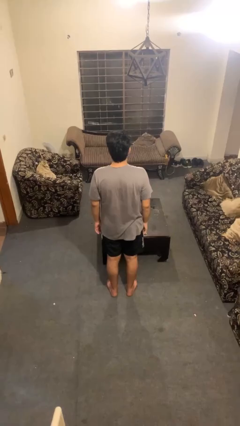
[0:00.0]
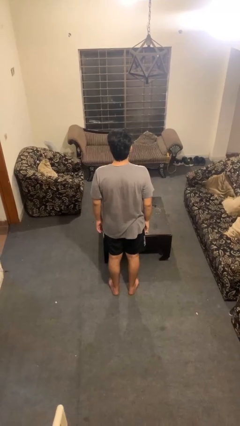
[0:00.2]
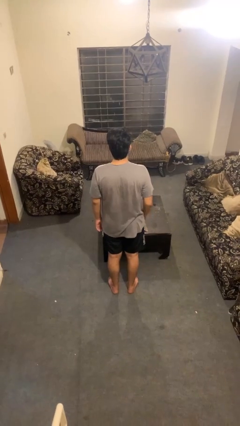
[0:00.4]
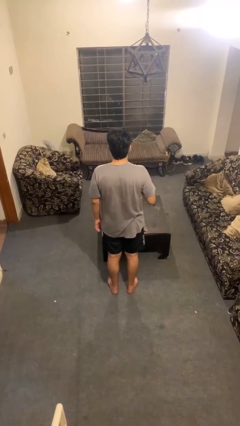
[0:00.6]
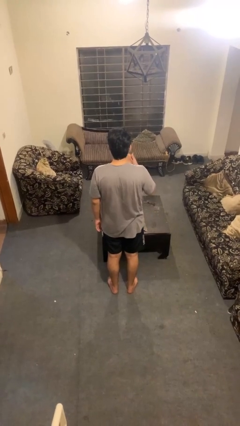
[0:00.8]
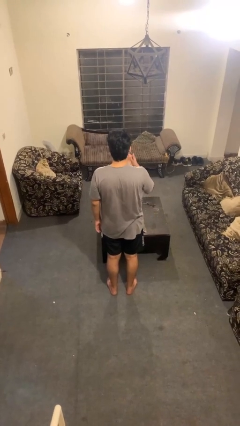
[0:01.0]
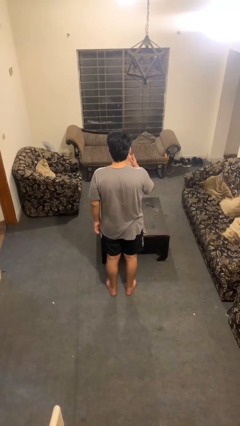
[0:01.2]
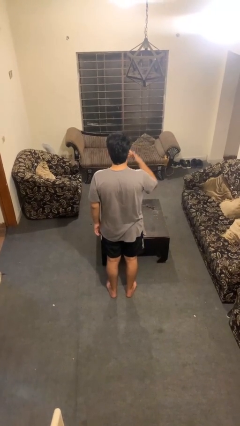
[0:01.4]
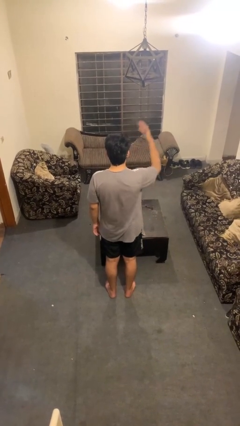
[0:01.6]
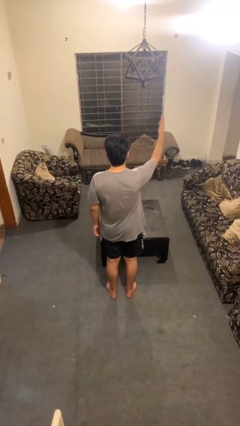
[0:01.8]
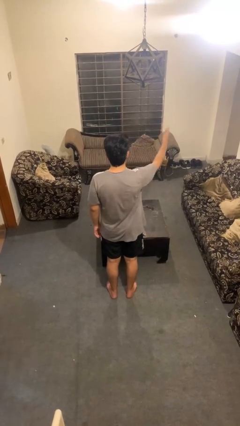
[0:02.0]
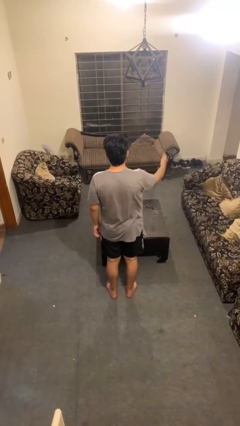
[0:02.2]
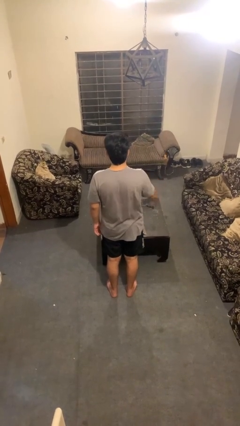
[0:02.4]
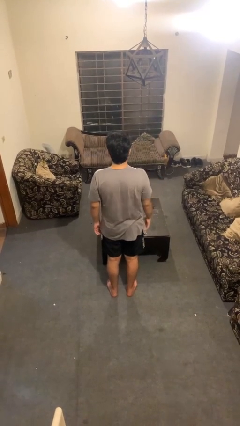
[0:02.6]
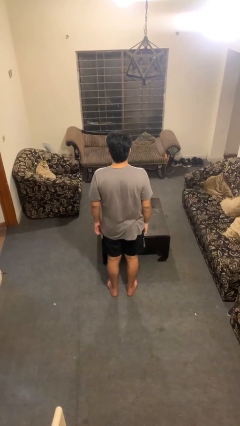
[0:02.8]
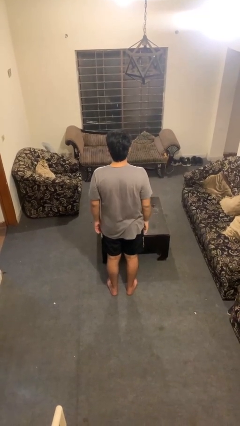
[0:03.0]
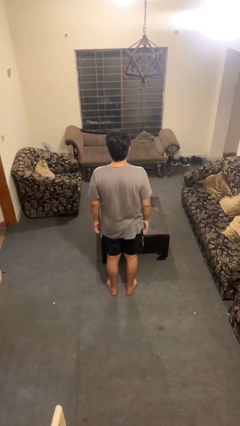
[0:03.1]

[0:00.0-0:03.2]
person gestures blow kiss

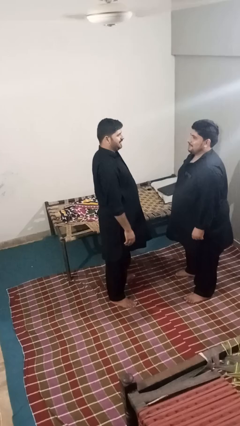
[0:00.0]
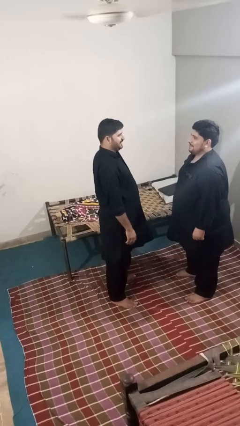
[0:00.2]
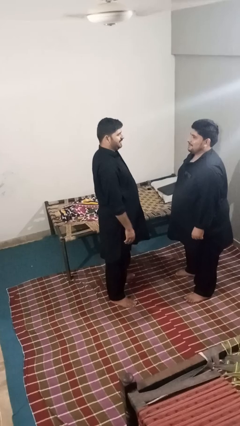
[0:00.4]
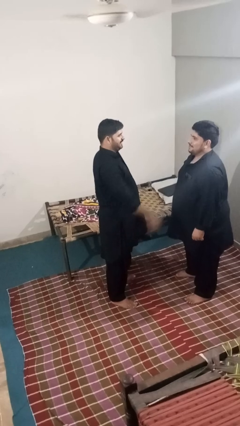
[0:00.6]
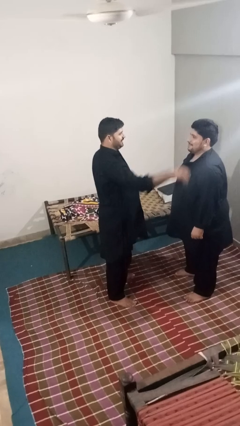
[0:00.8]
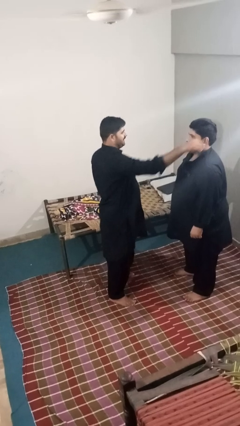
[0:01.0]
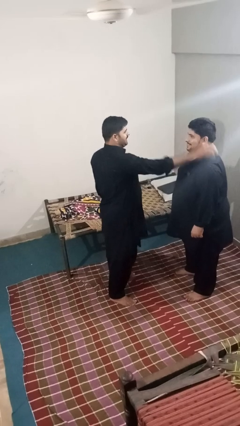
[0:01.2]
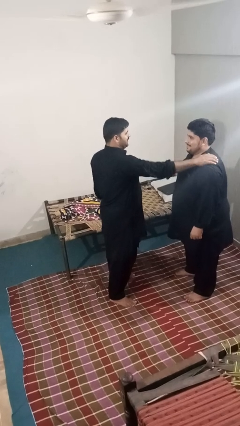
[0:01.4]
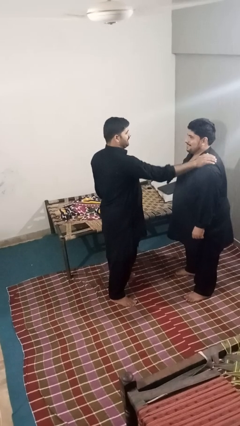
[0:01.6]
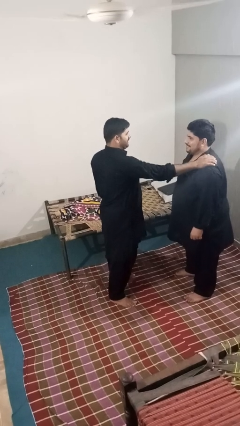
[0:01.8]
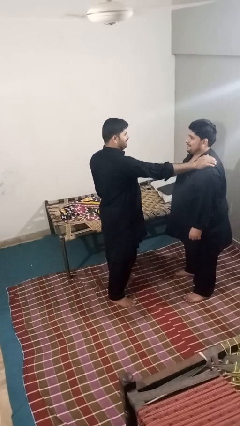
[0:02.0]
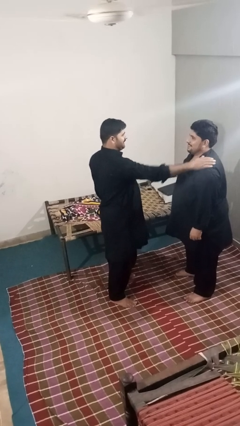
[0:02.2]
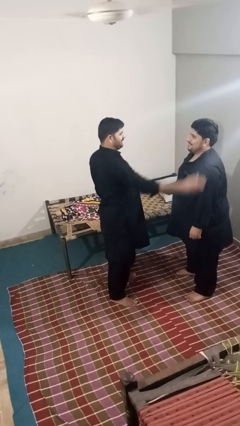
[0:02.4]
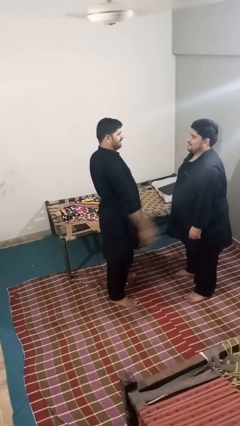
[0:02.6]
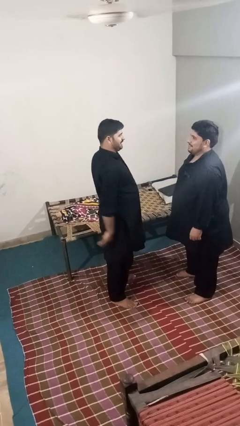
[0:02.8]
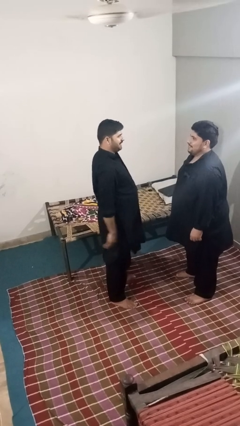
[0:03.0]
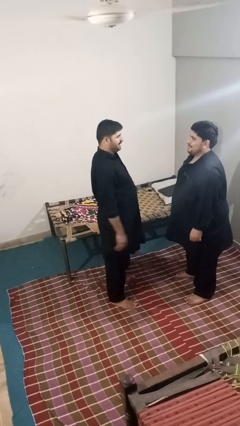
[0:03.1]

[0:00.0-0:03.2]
person pounds shoulders of person

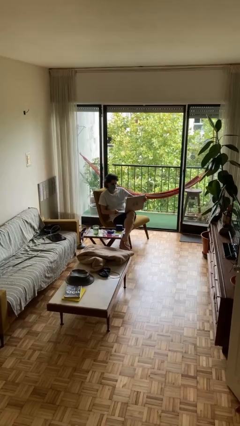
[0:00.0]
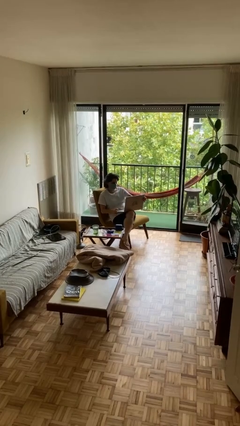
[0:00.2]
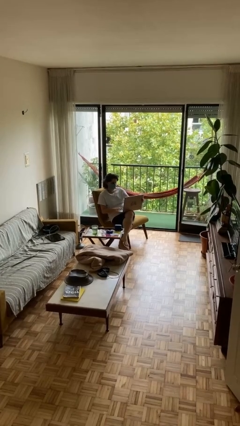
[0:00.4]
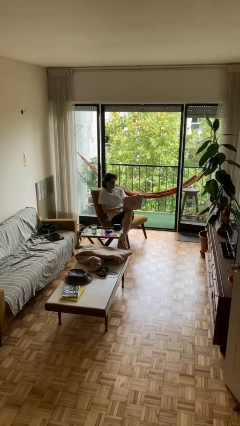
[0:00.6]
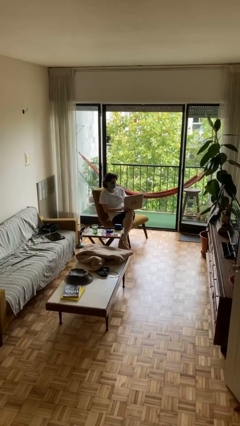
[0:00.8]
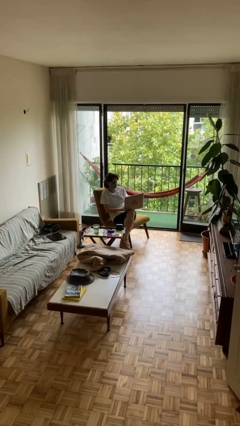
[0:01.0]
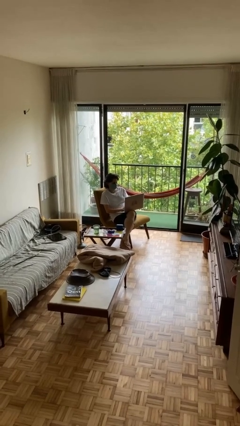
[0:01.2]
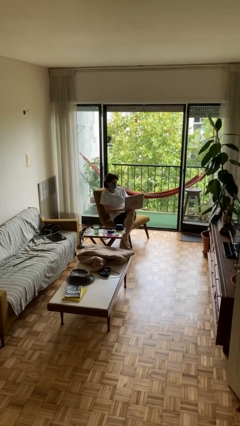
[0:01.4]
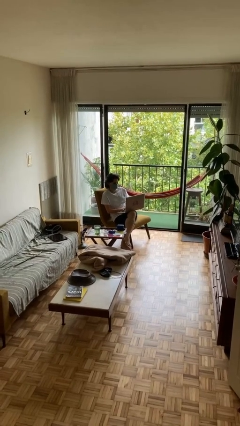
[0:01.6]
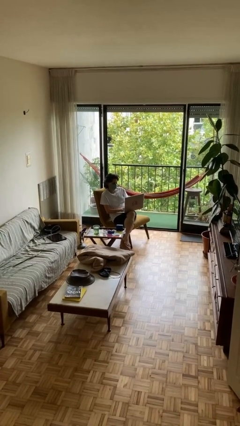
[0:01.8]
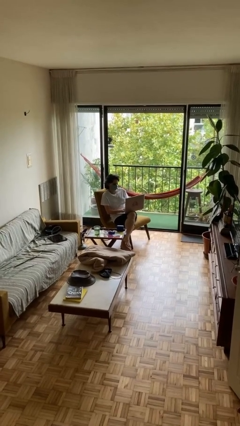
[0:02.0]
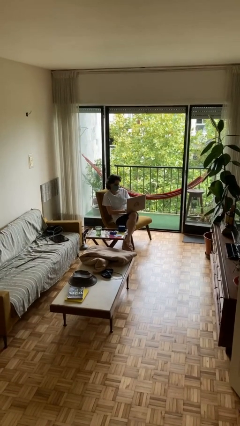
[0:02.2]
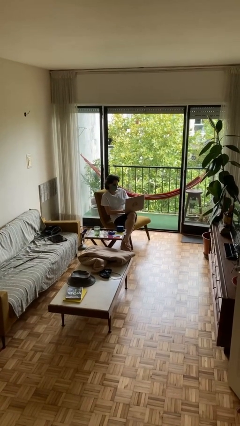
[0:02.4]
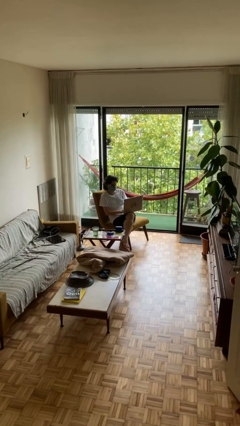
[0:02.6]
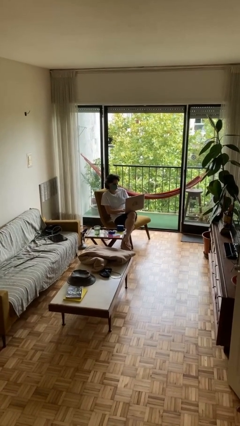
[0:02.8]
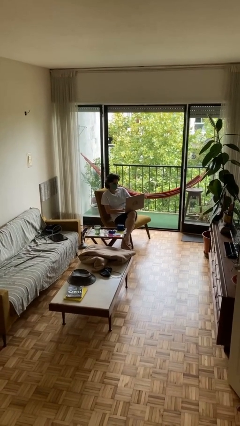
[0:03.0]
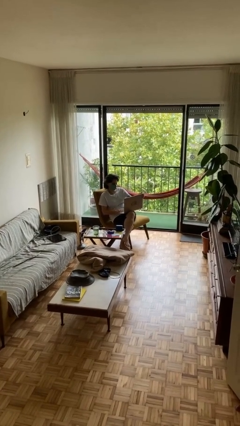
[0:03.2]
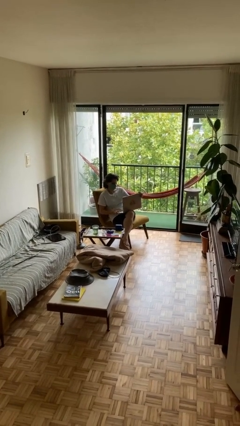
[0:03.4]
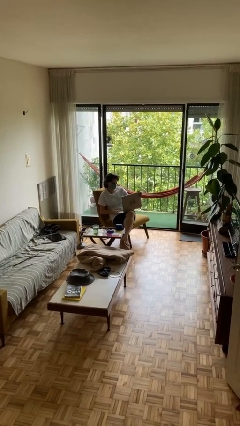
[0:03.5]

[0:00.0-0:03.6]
person interacts with laptop

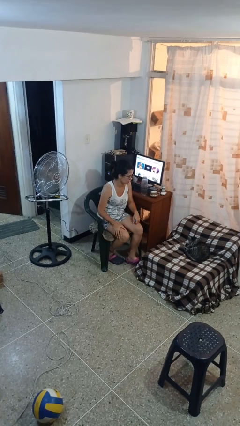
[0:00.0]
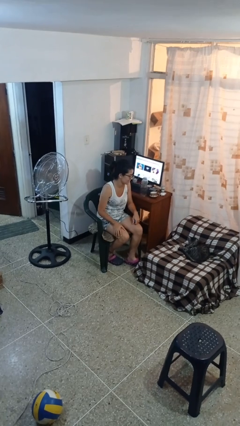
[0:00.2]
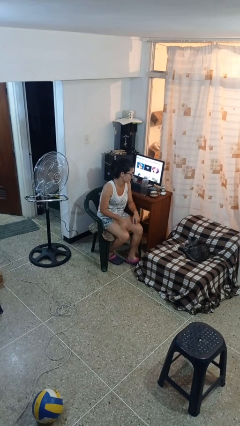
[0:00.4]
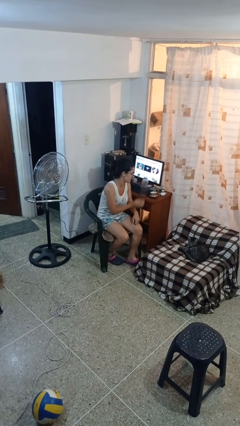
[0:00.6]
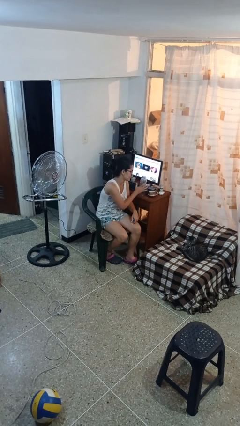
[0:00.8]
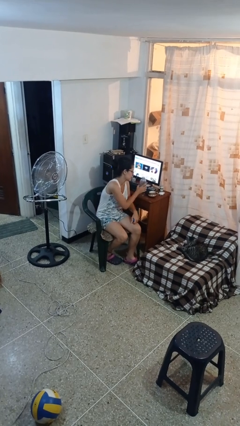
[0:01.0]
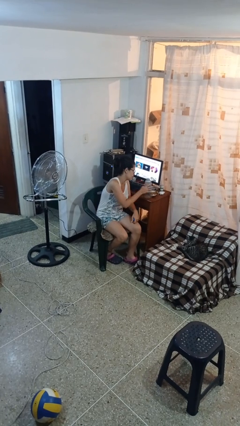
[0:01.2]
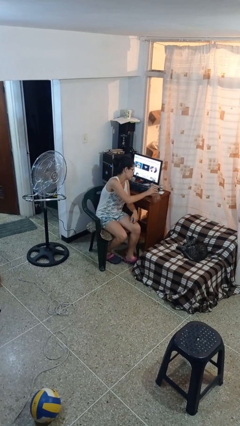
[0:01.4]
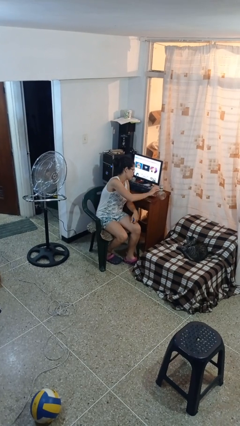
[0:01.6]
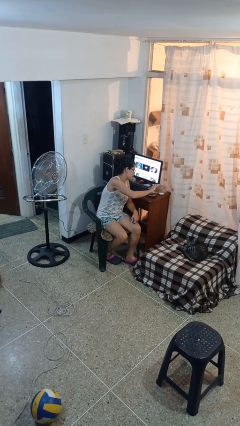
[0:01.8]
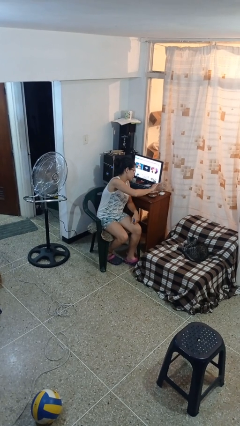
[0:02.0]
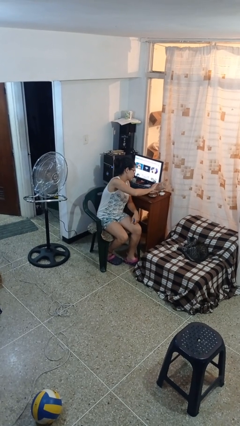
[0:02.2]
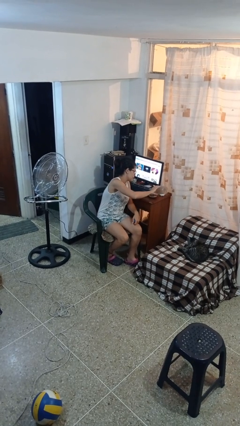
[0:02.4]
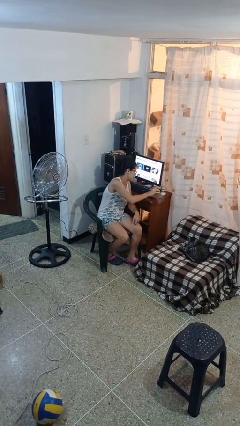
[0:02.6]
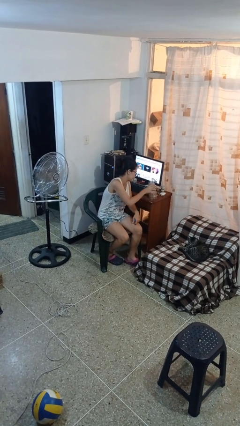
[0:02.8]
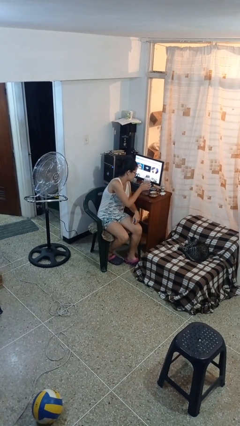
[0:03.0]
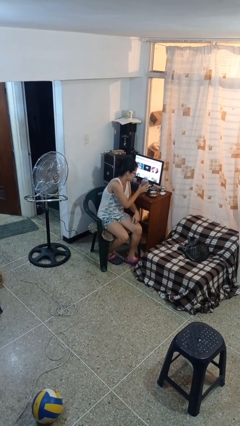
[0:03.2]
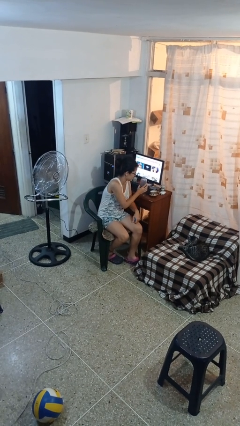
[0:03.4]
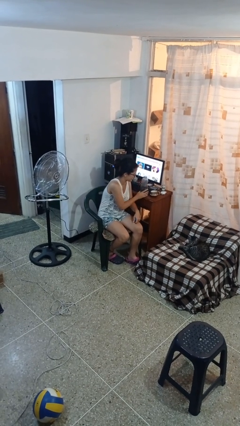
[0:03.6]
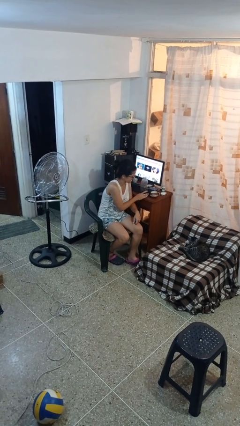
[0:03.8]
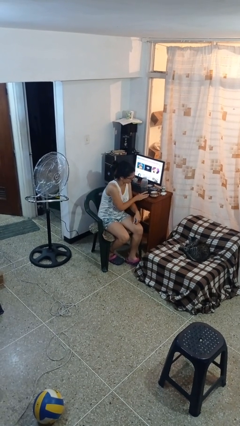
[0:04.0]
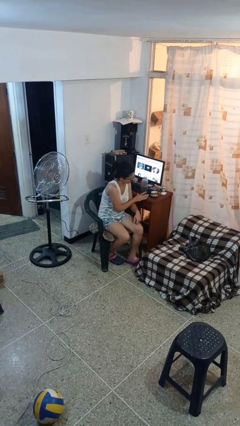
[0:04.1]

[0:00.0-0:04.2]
person pours liquid into cup

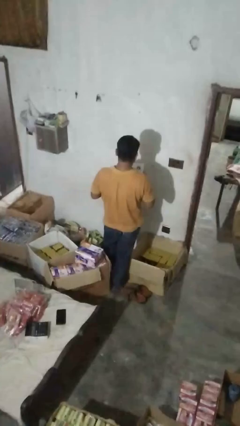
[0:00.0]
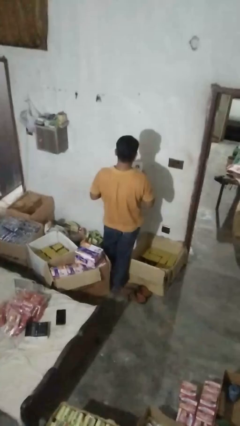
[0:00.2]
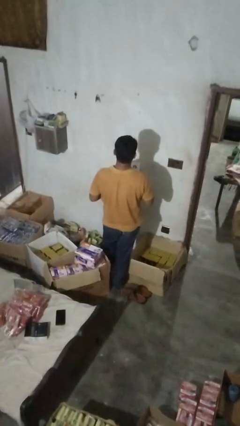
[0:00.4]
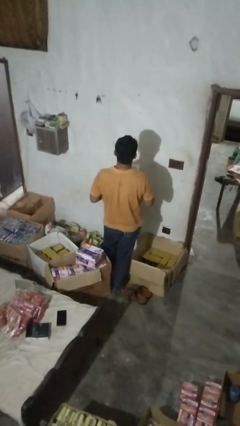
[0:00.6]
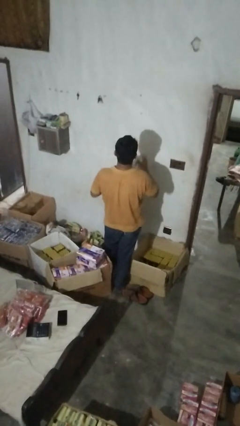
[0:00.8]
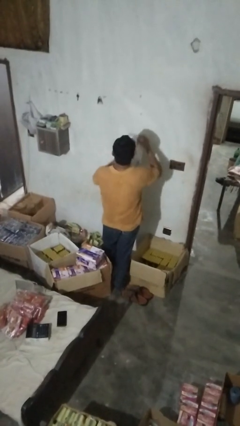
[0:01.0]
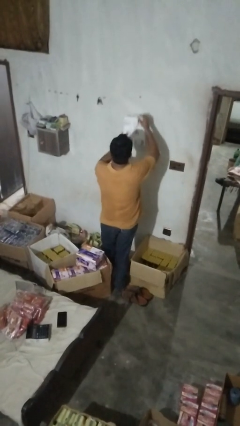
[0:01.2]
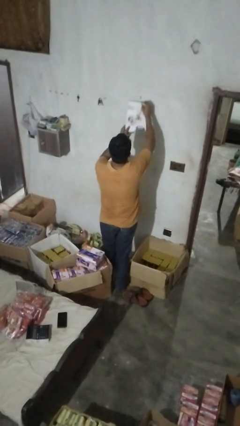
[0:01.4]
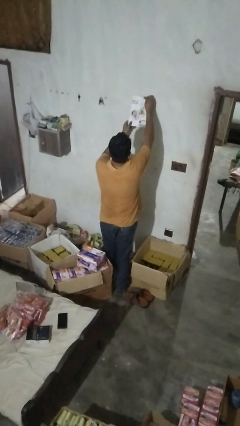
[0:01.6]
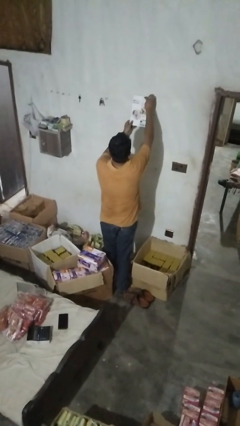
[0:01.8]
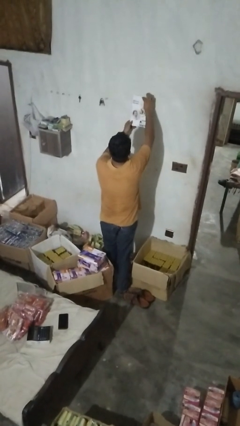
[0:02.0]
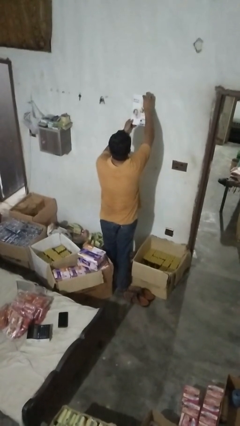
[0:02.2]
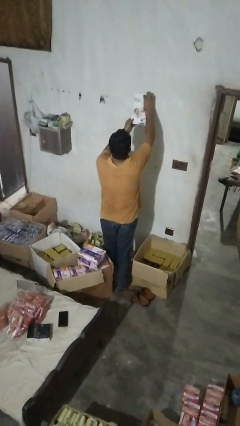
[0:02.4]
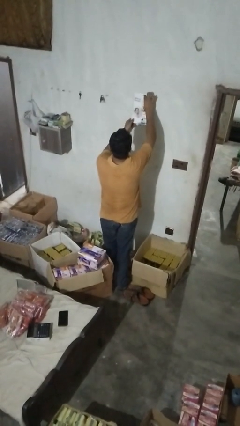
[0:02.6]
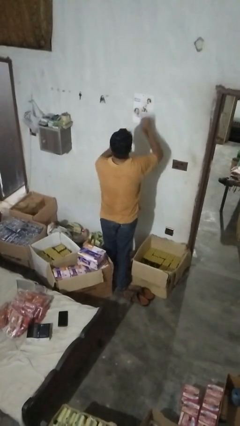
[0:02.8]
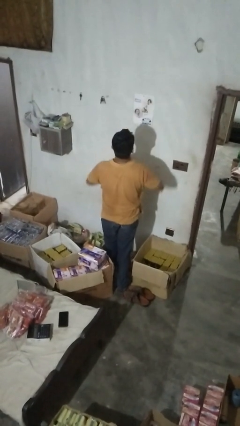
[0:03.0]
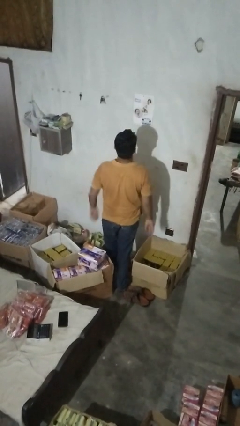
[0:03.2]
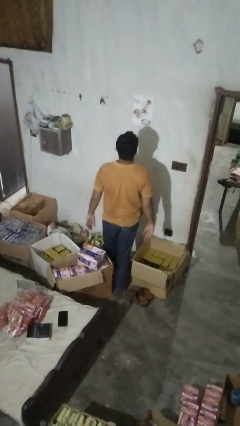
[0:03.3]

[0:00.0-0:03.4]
person puts up picture frame
